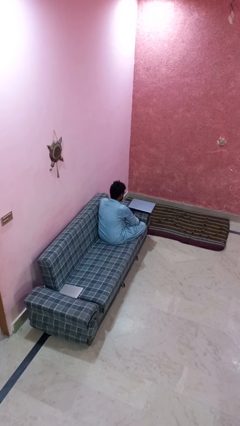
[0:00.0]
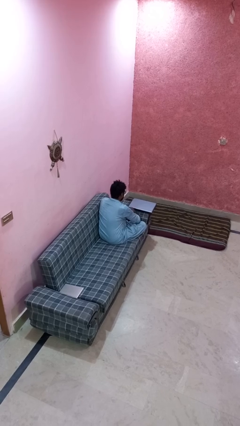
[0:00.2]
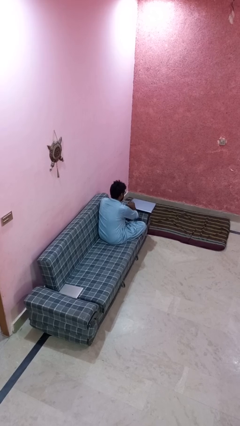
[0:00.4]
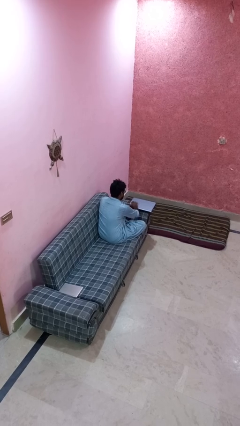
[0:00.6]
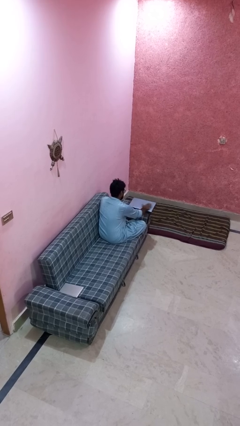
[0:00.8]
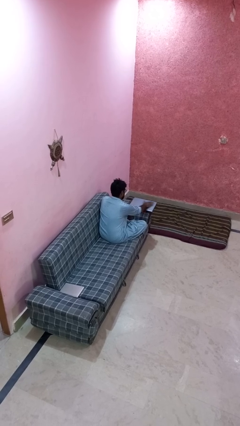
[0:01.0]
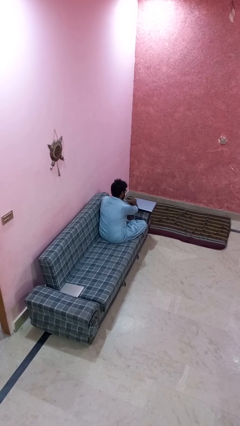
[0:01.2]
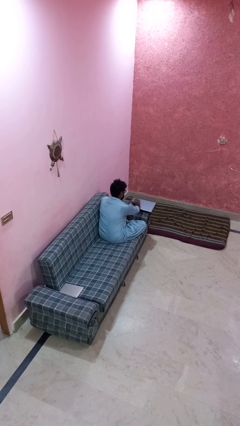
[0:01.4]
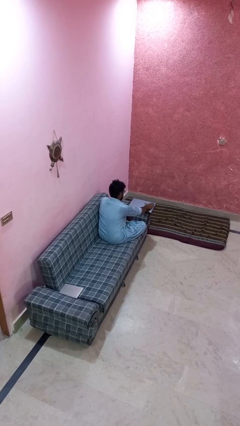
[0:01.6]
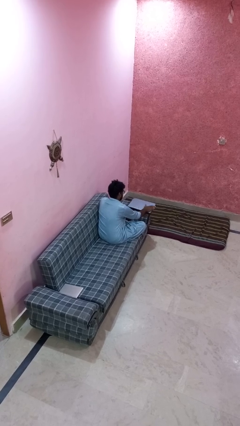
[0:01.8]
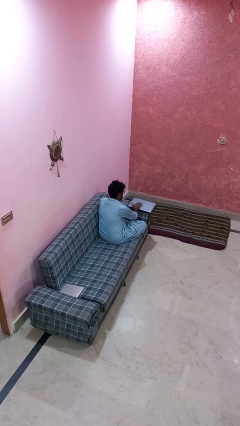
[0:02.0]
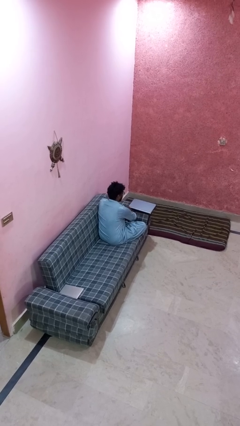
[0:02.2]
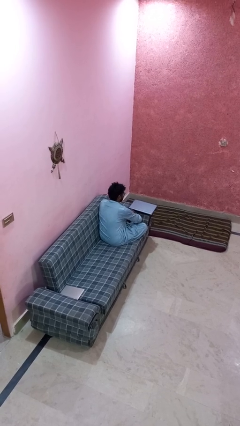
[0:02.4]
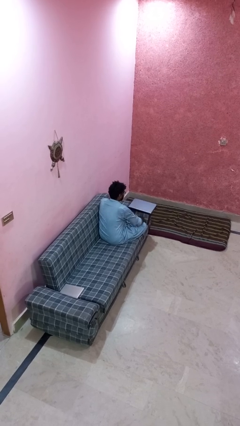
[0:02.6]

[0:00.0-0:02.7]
person waves hand over object

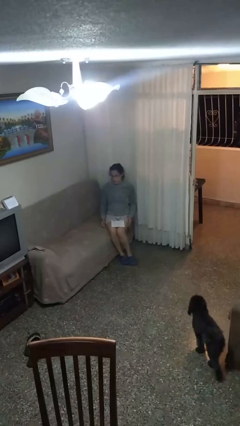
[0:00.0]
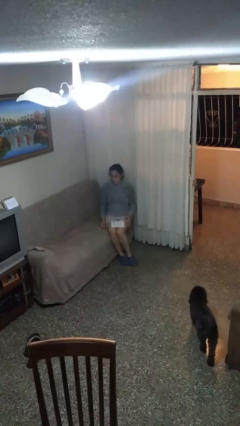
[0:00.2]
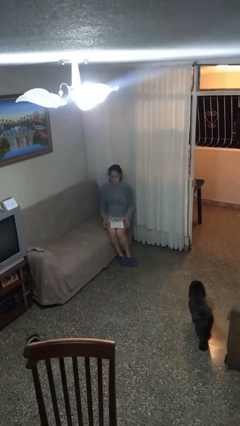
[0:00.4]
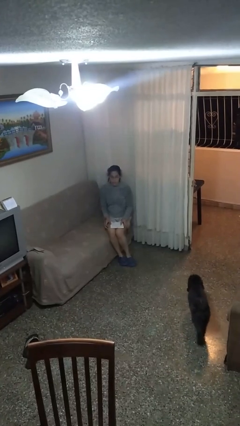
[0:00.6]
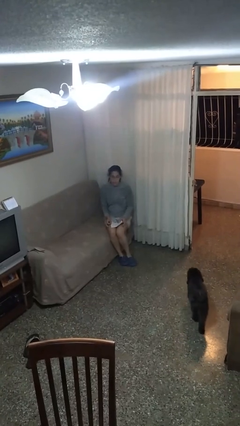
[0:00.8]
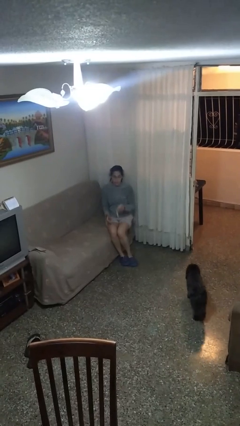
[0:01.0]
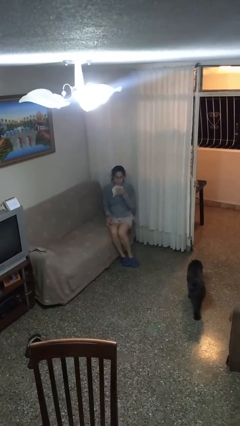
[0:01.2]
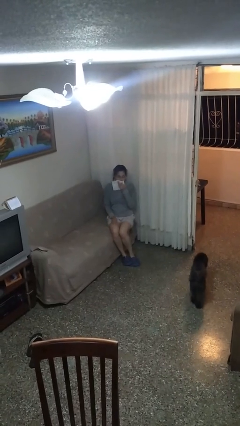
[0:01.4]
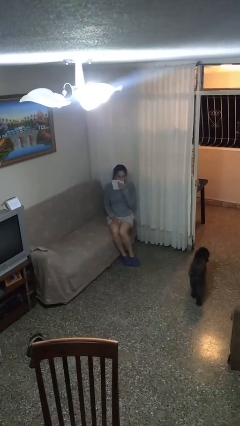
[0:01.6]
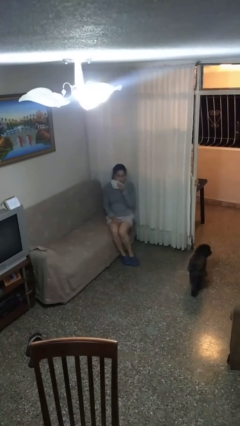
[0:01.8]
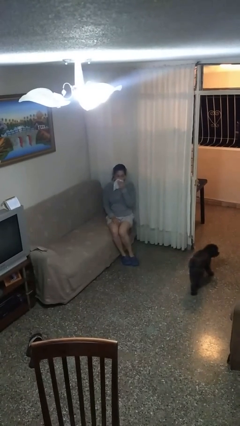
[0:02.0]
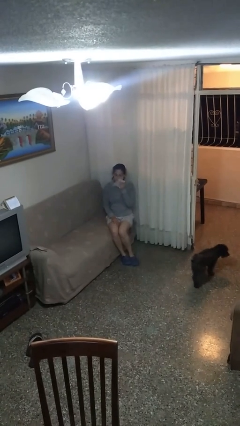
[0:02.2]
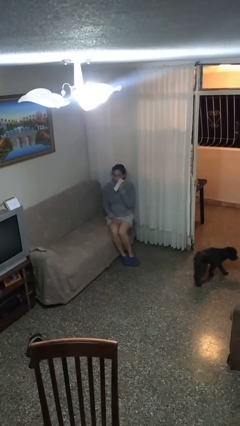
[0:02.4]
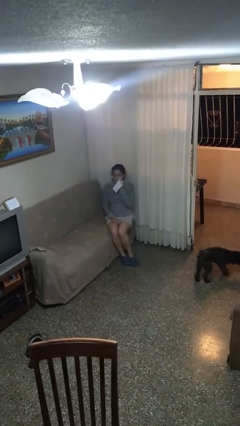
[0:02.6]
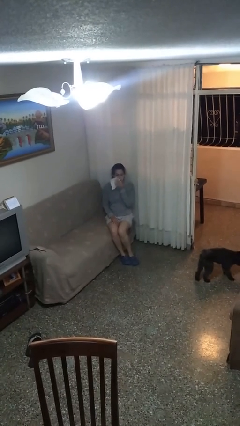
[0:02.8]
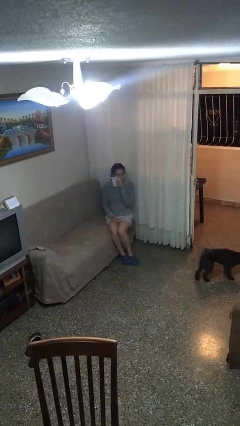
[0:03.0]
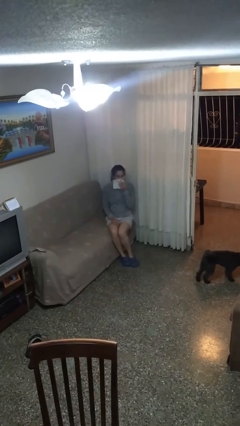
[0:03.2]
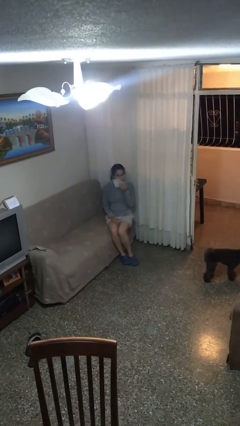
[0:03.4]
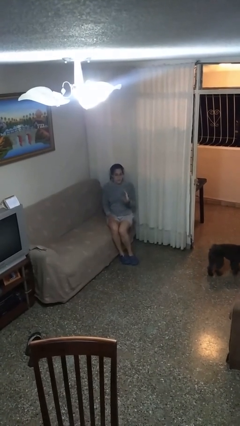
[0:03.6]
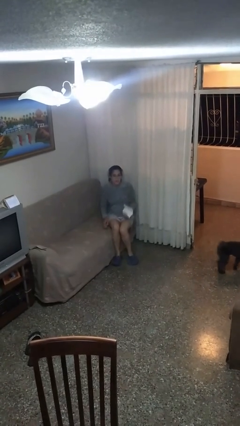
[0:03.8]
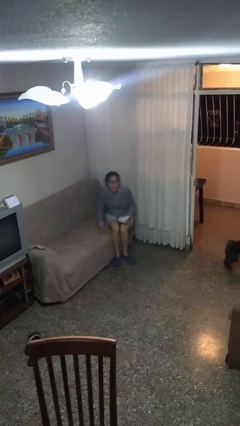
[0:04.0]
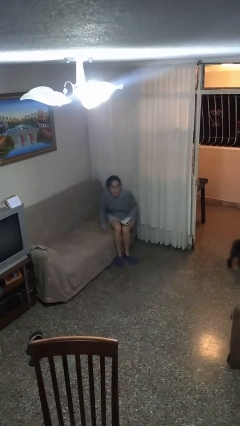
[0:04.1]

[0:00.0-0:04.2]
person wipes mouth with napkin

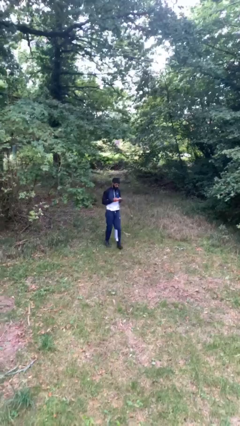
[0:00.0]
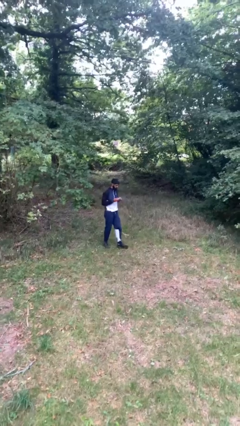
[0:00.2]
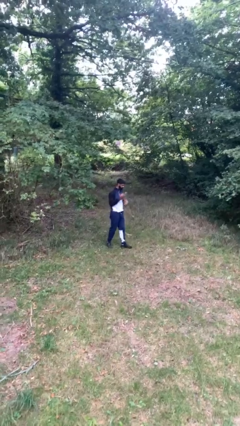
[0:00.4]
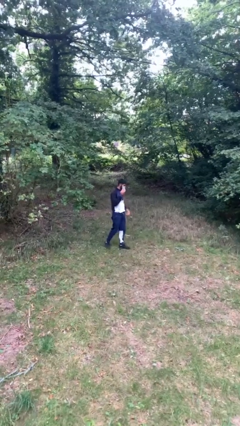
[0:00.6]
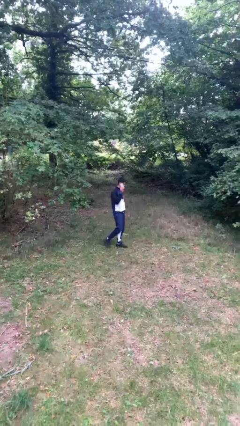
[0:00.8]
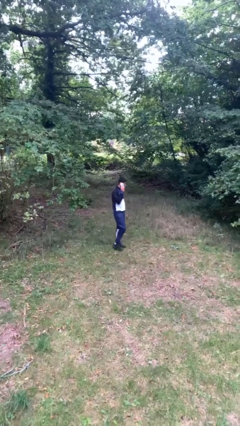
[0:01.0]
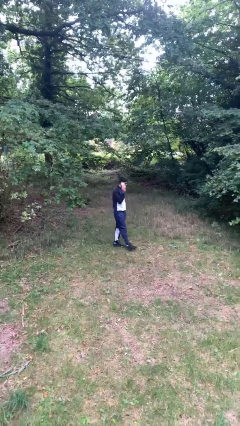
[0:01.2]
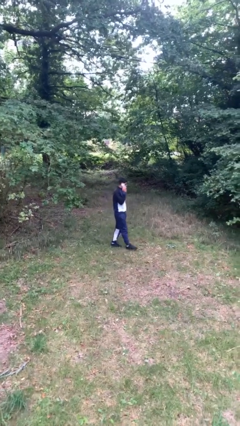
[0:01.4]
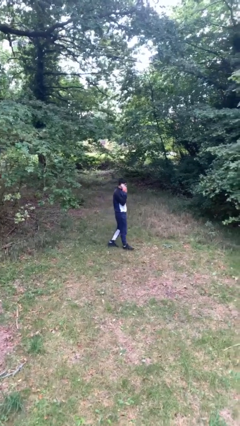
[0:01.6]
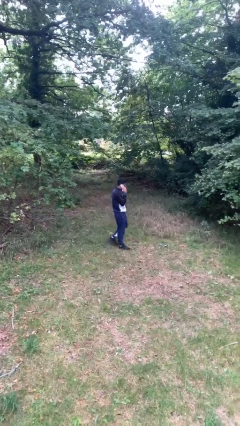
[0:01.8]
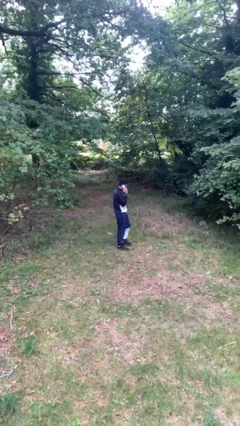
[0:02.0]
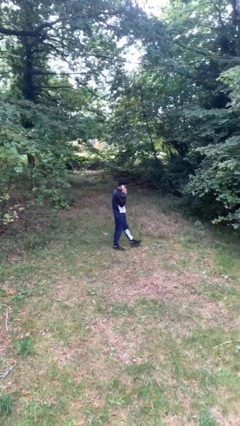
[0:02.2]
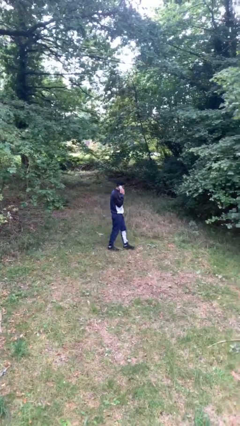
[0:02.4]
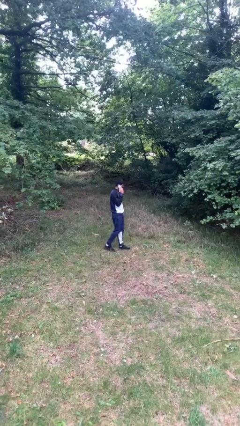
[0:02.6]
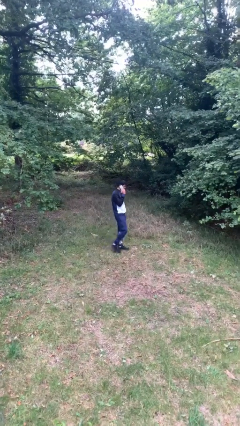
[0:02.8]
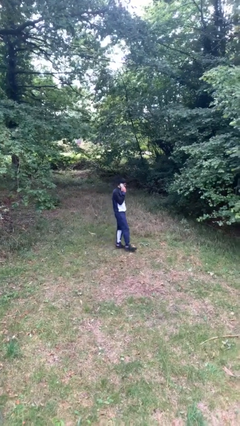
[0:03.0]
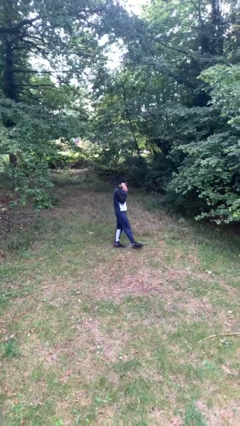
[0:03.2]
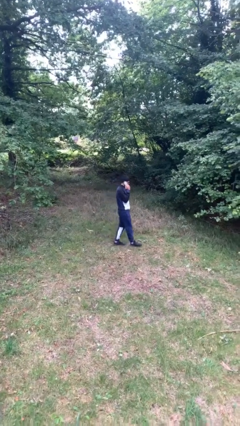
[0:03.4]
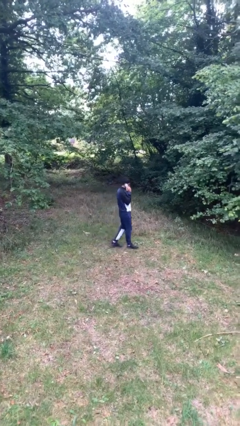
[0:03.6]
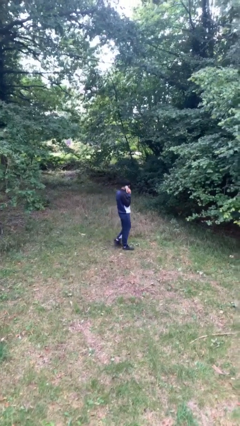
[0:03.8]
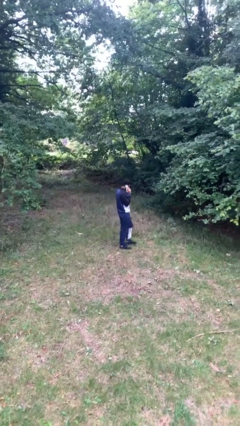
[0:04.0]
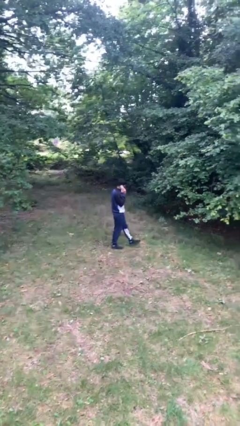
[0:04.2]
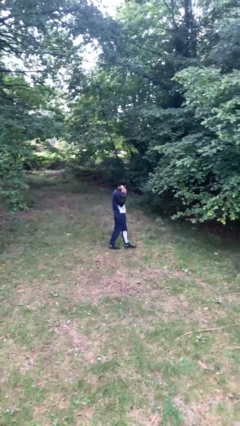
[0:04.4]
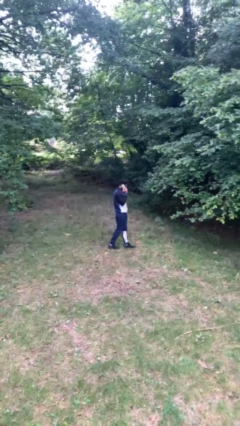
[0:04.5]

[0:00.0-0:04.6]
person talks on phone

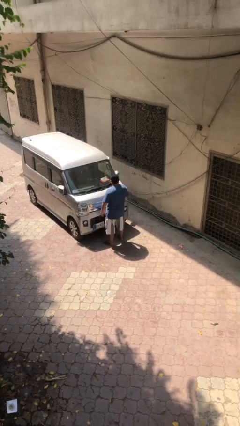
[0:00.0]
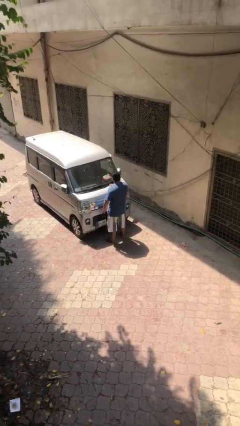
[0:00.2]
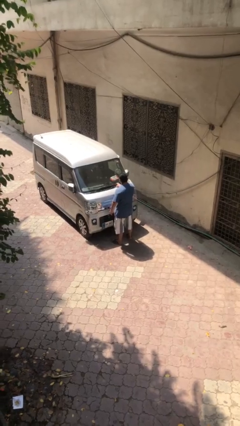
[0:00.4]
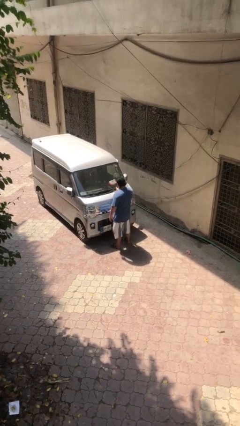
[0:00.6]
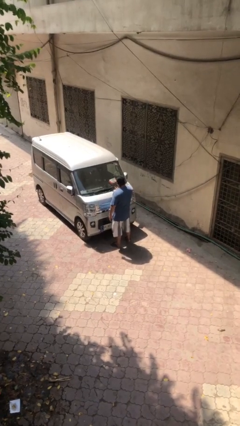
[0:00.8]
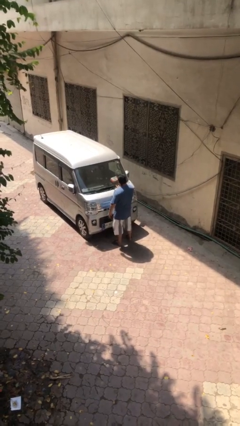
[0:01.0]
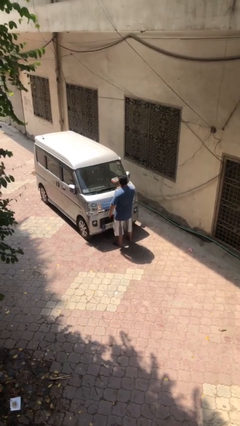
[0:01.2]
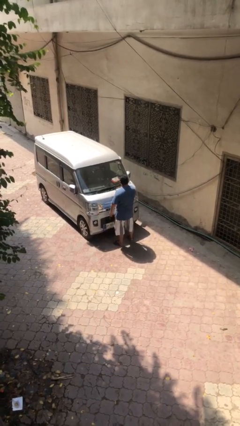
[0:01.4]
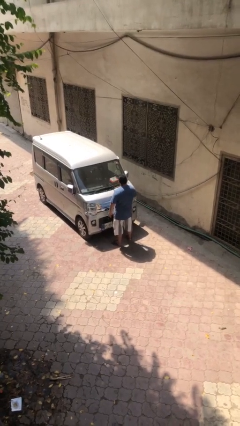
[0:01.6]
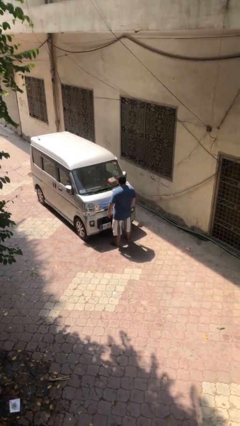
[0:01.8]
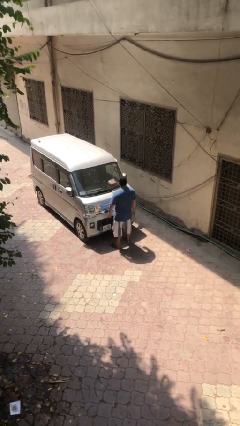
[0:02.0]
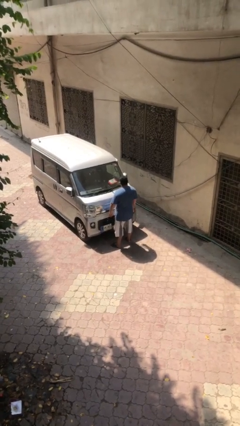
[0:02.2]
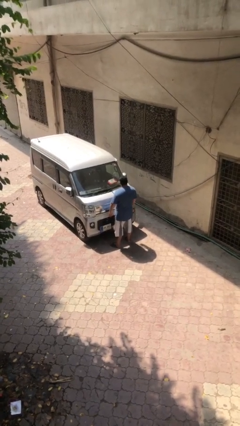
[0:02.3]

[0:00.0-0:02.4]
person flips up car wipers

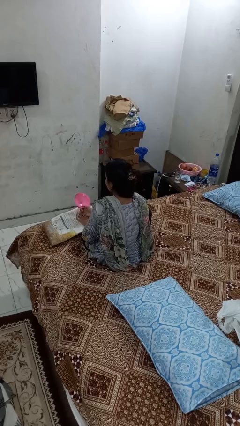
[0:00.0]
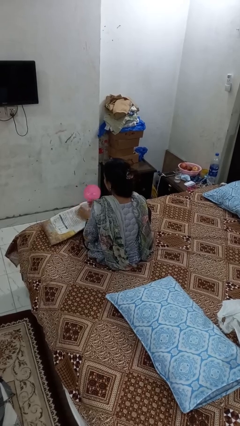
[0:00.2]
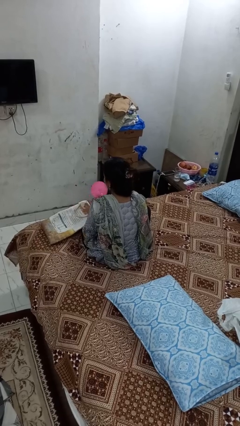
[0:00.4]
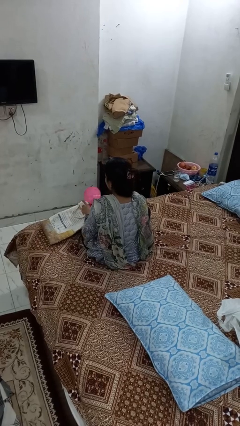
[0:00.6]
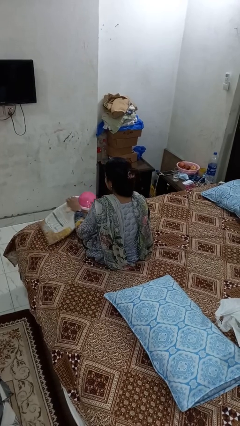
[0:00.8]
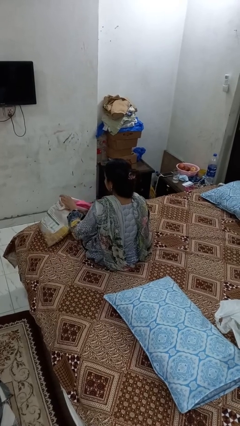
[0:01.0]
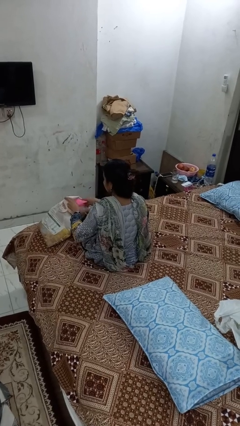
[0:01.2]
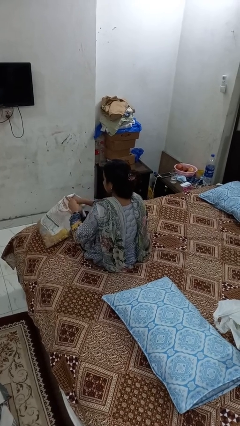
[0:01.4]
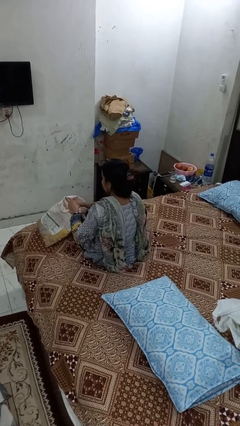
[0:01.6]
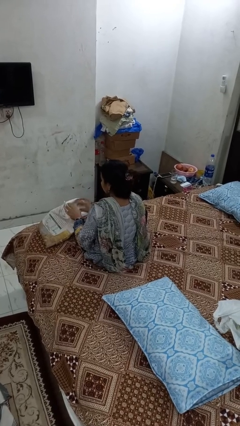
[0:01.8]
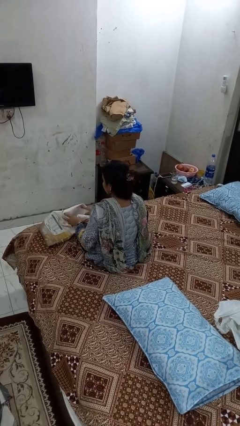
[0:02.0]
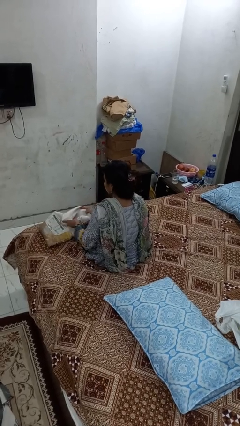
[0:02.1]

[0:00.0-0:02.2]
person puts object into bag

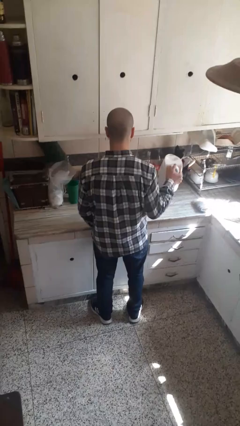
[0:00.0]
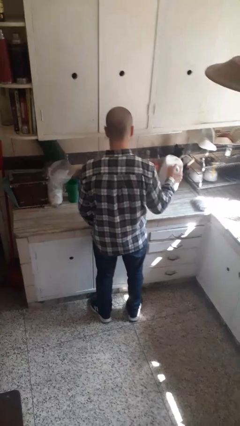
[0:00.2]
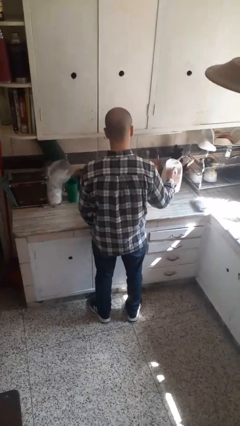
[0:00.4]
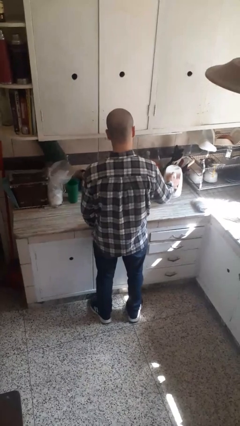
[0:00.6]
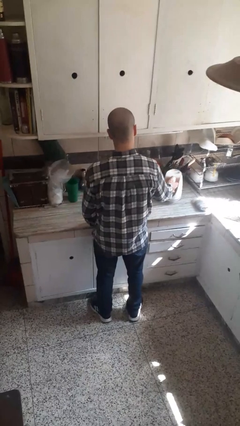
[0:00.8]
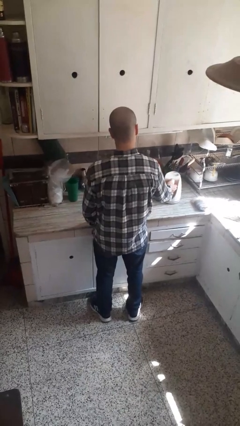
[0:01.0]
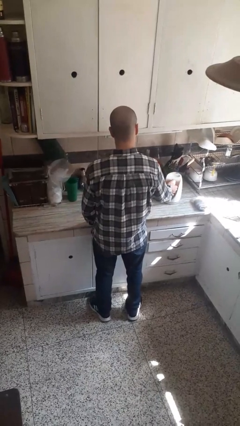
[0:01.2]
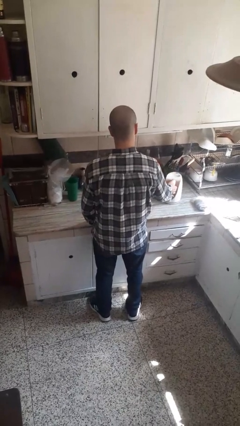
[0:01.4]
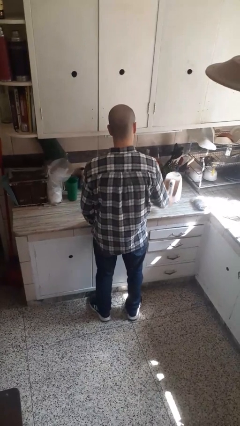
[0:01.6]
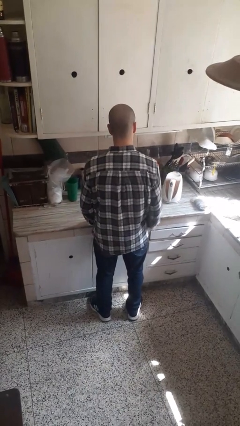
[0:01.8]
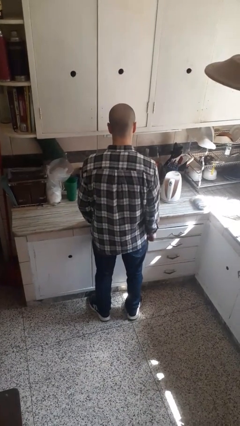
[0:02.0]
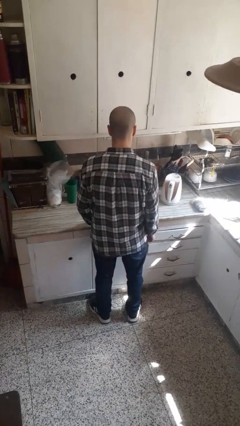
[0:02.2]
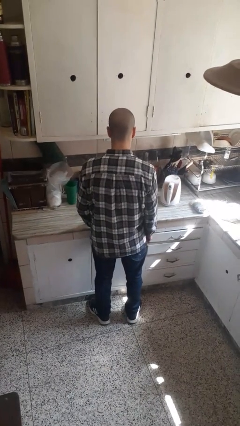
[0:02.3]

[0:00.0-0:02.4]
person puts down object on countertop
